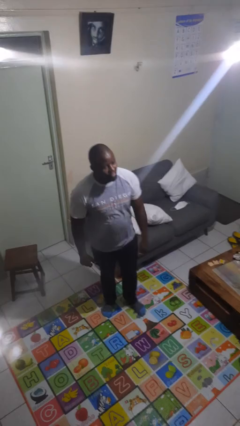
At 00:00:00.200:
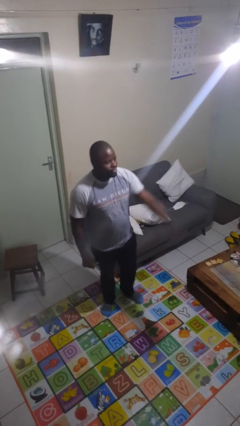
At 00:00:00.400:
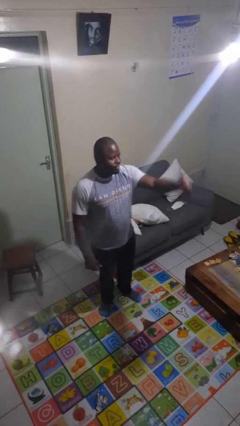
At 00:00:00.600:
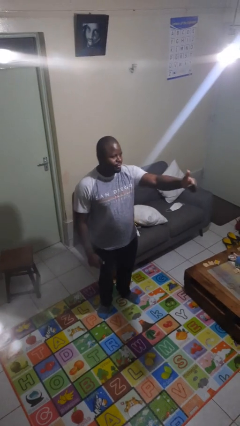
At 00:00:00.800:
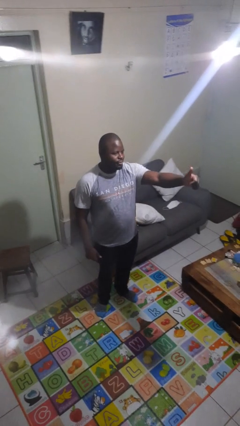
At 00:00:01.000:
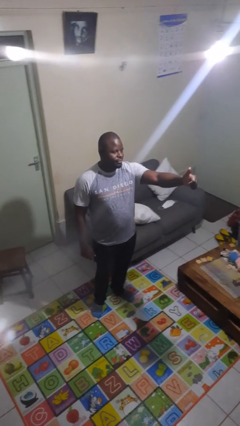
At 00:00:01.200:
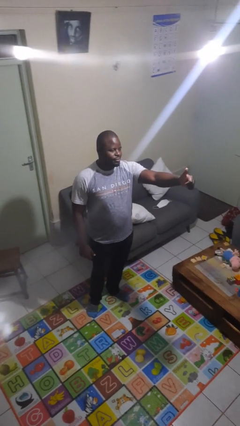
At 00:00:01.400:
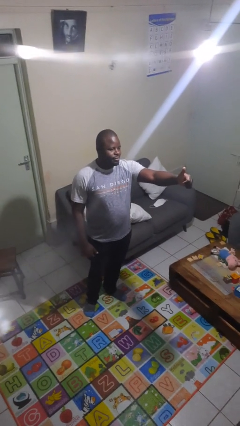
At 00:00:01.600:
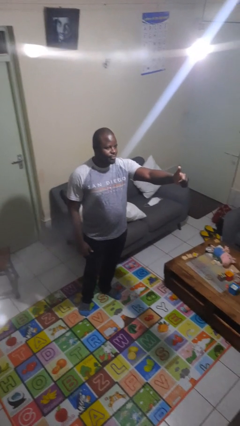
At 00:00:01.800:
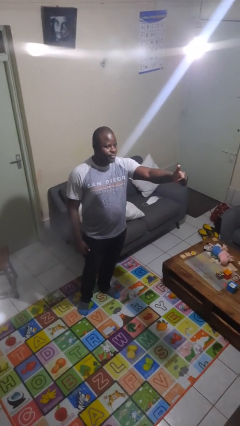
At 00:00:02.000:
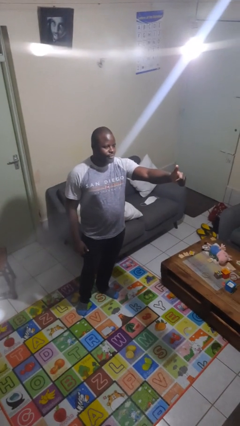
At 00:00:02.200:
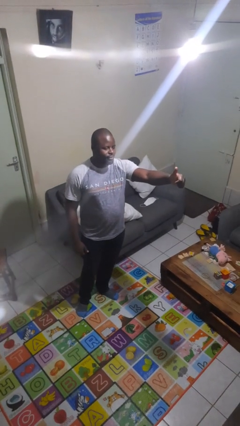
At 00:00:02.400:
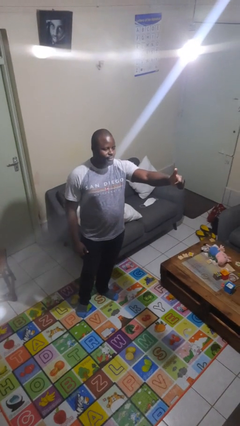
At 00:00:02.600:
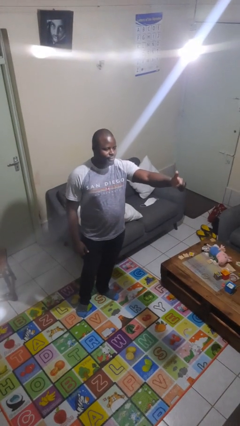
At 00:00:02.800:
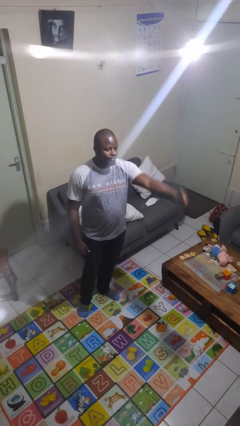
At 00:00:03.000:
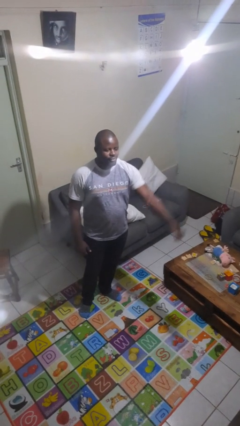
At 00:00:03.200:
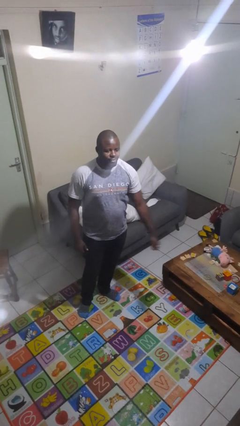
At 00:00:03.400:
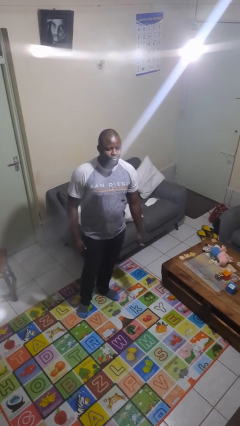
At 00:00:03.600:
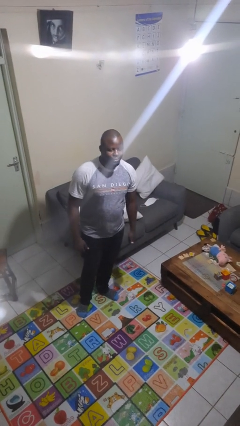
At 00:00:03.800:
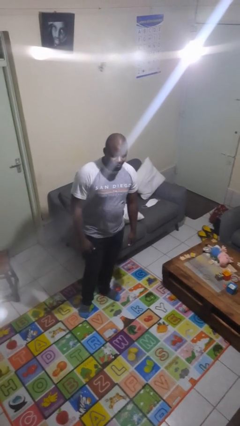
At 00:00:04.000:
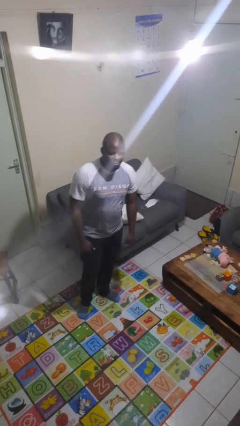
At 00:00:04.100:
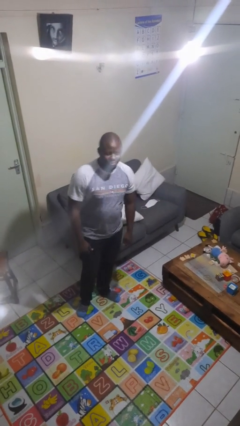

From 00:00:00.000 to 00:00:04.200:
person gestures thumbs up

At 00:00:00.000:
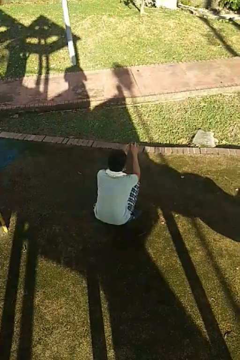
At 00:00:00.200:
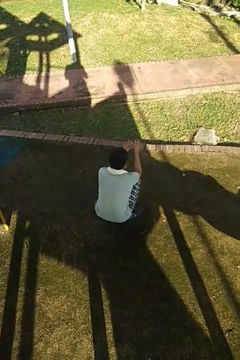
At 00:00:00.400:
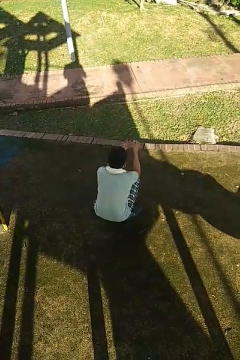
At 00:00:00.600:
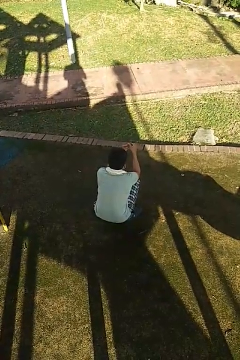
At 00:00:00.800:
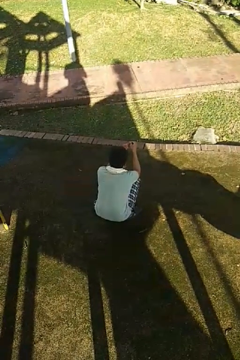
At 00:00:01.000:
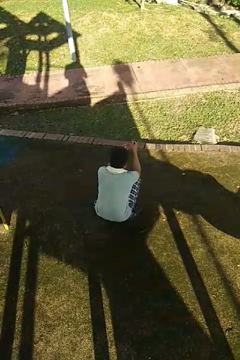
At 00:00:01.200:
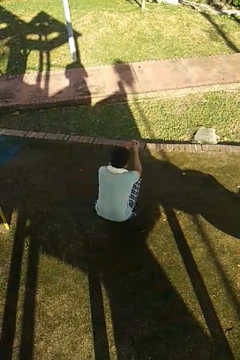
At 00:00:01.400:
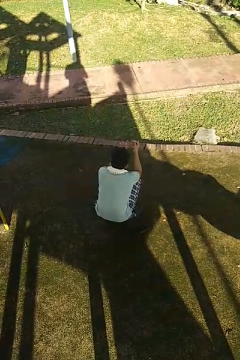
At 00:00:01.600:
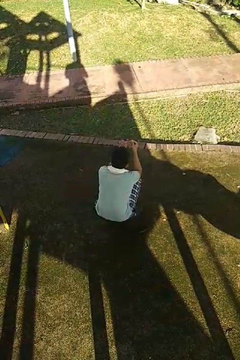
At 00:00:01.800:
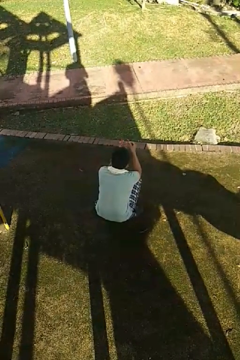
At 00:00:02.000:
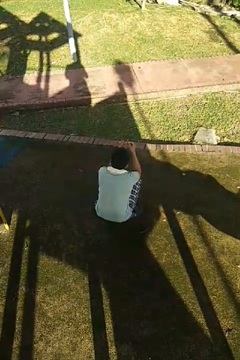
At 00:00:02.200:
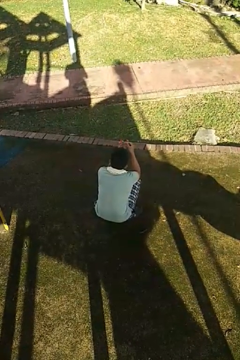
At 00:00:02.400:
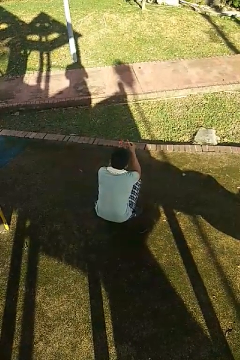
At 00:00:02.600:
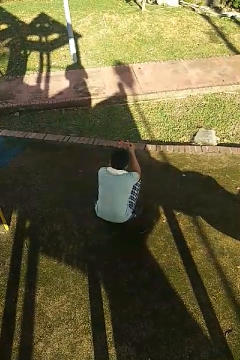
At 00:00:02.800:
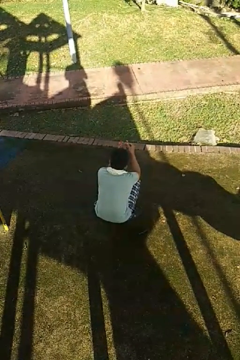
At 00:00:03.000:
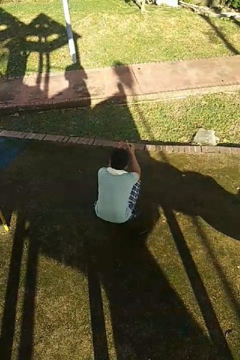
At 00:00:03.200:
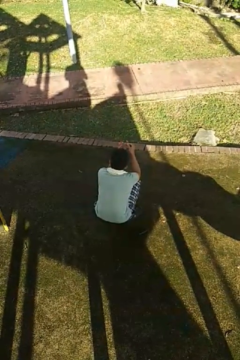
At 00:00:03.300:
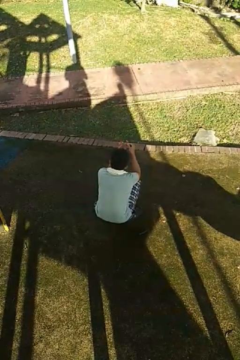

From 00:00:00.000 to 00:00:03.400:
person paints fingernails

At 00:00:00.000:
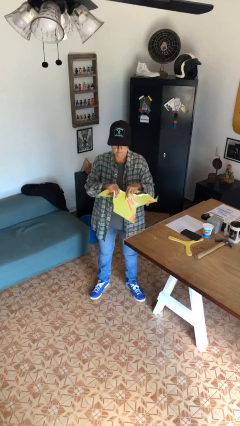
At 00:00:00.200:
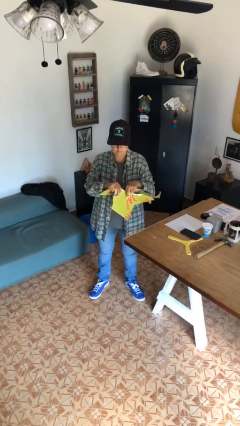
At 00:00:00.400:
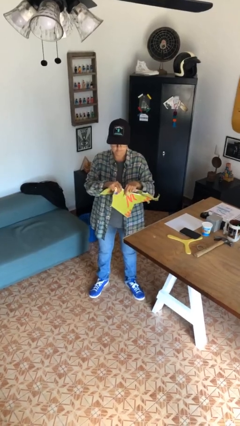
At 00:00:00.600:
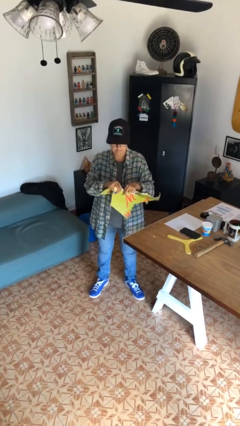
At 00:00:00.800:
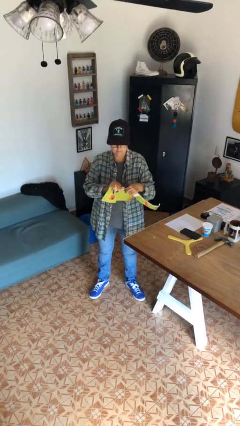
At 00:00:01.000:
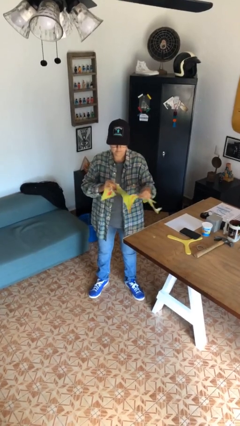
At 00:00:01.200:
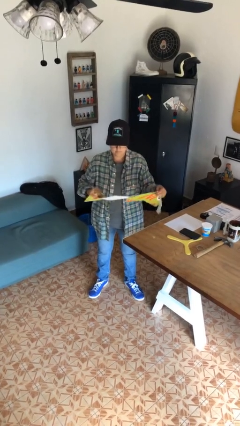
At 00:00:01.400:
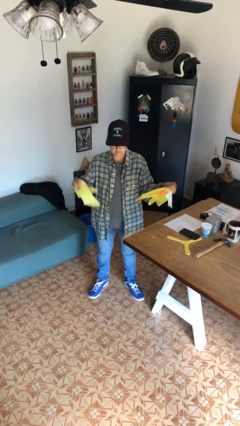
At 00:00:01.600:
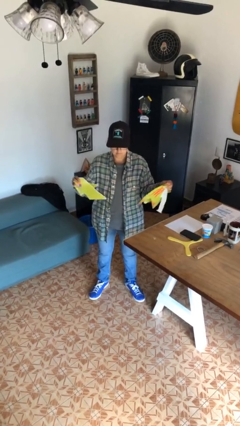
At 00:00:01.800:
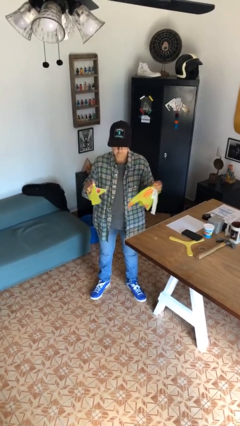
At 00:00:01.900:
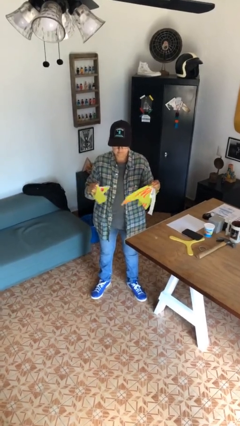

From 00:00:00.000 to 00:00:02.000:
person tears paper

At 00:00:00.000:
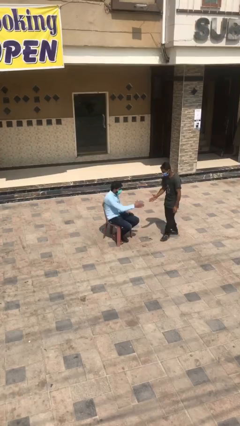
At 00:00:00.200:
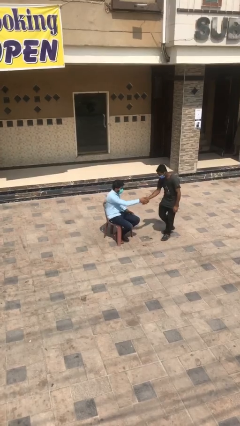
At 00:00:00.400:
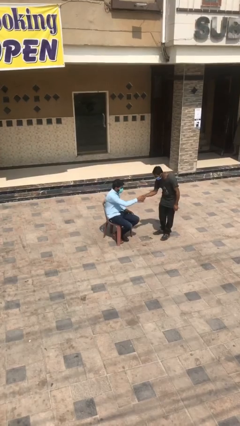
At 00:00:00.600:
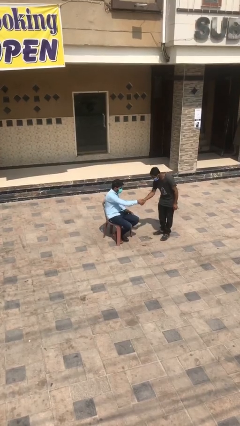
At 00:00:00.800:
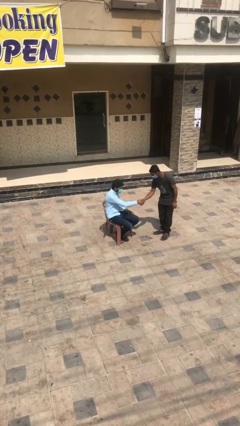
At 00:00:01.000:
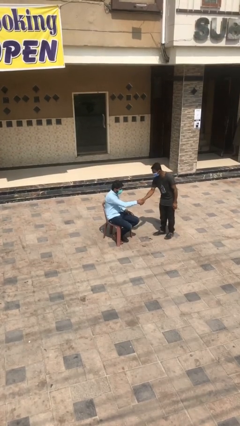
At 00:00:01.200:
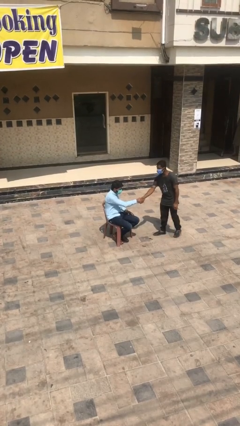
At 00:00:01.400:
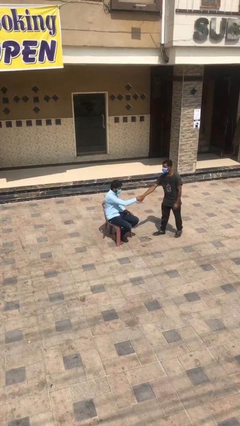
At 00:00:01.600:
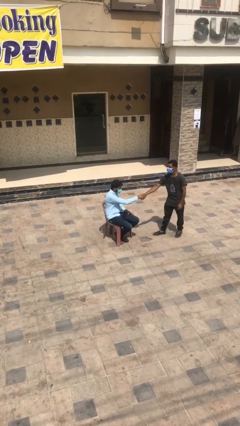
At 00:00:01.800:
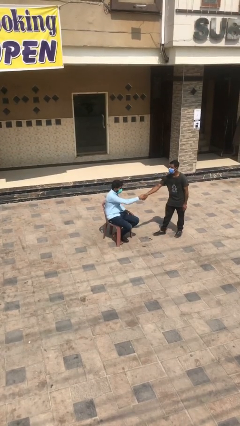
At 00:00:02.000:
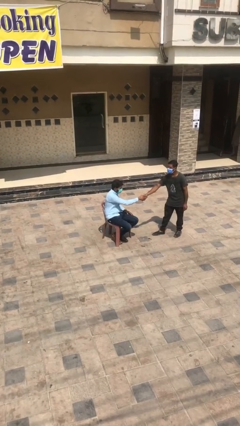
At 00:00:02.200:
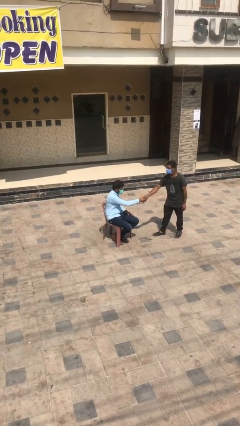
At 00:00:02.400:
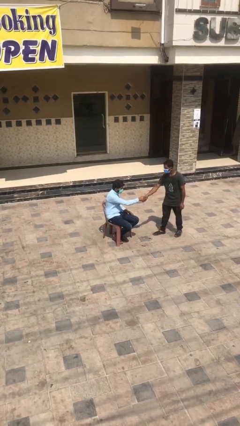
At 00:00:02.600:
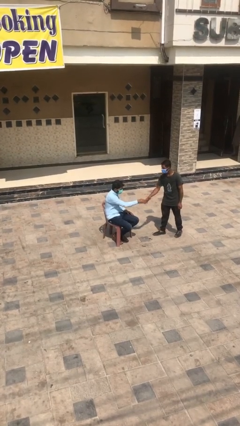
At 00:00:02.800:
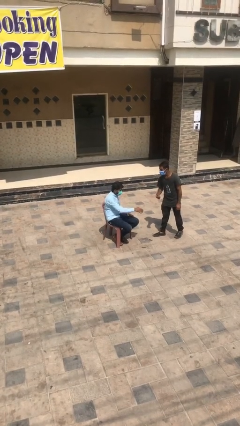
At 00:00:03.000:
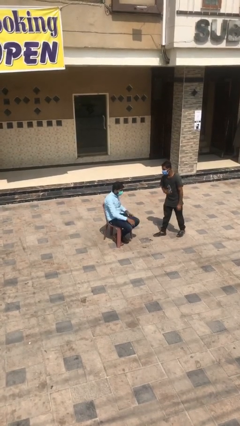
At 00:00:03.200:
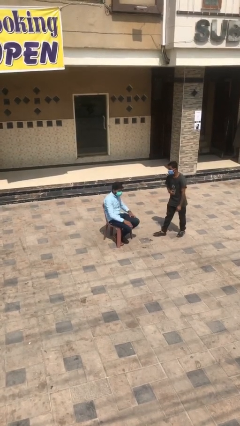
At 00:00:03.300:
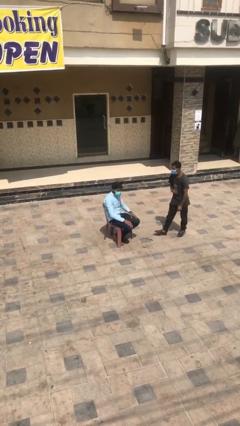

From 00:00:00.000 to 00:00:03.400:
person shakes hand

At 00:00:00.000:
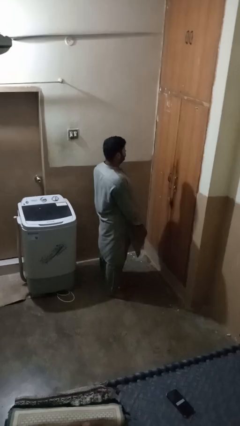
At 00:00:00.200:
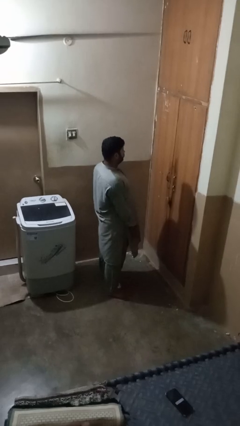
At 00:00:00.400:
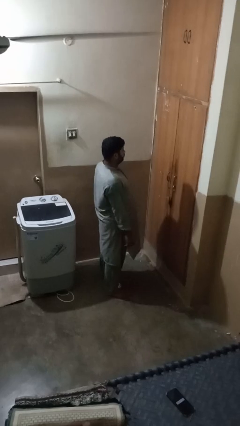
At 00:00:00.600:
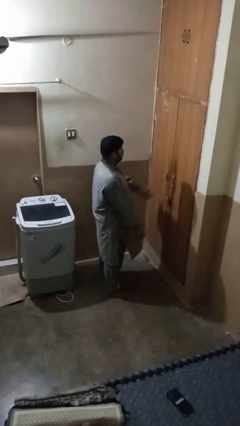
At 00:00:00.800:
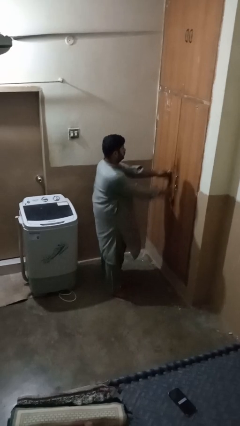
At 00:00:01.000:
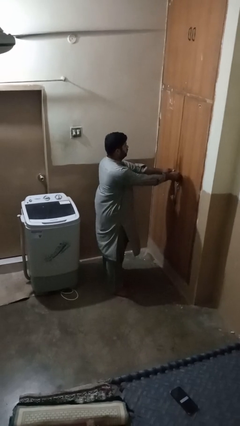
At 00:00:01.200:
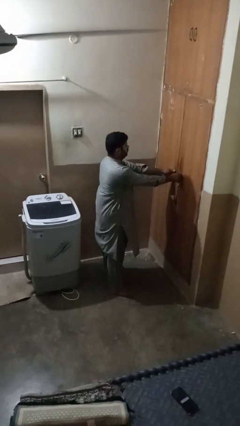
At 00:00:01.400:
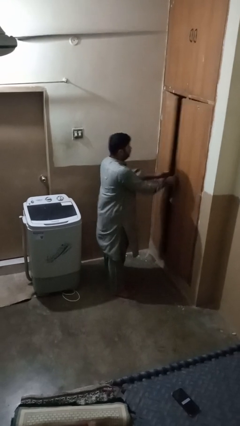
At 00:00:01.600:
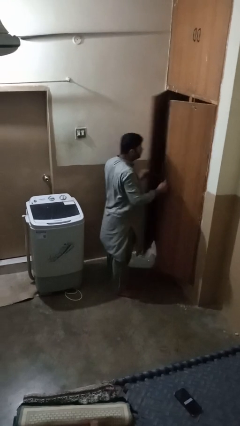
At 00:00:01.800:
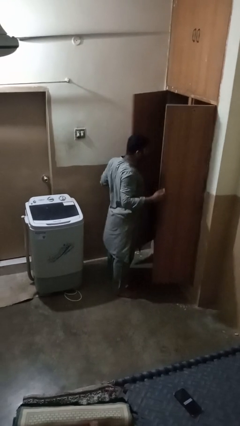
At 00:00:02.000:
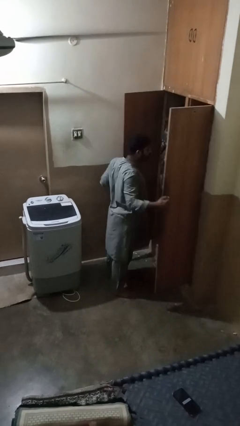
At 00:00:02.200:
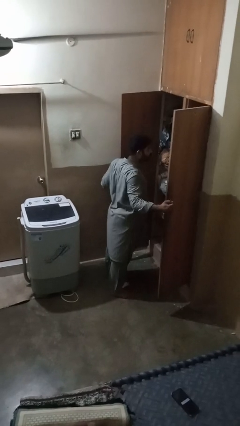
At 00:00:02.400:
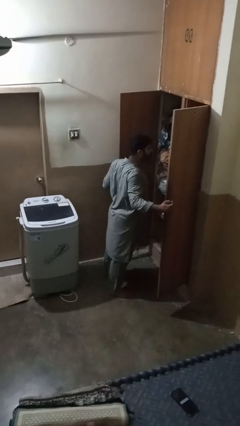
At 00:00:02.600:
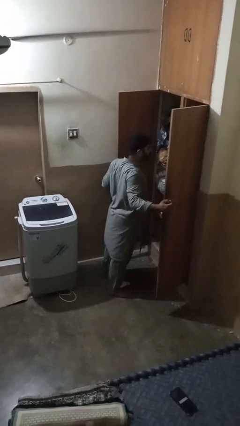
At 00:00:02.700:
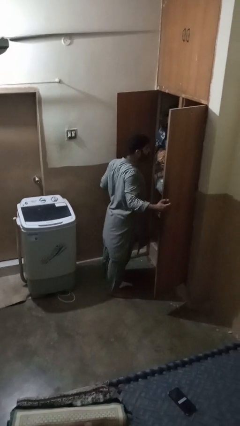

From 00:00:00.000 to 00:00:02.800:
person opens closet door

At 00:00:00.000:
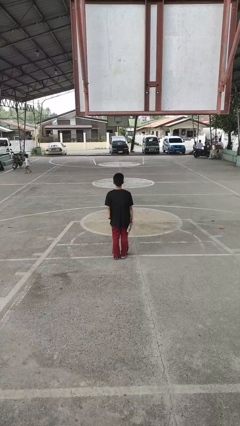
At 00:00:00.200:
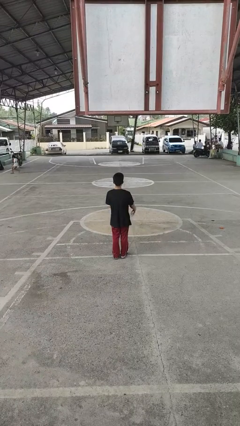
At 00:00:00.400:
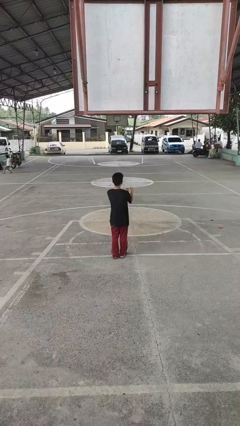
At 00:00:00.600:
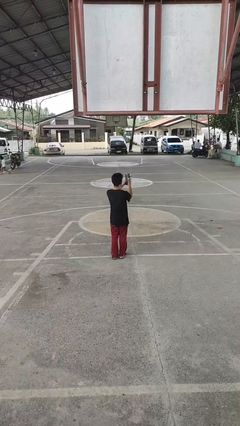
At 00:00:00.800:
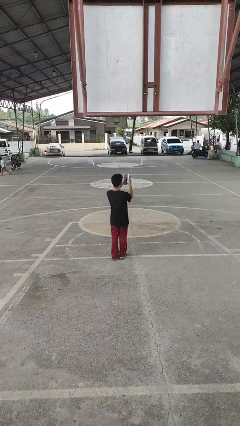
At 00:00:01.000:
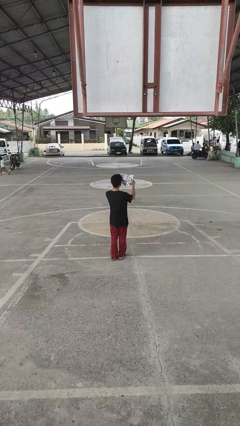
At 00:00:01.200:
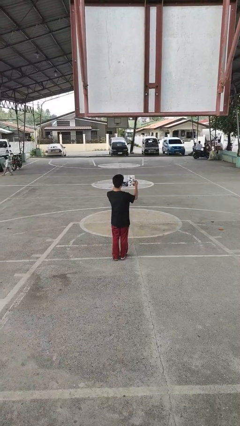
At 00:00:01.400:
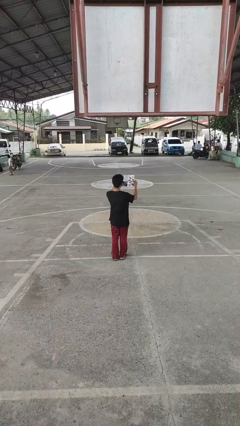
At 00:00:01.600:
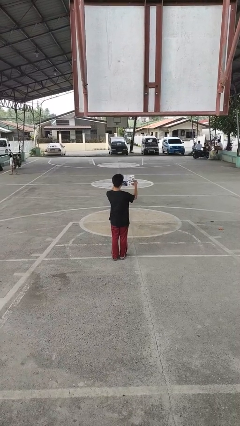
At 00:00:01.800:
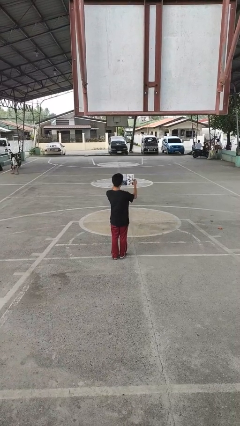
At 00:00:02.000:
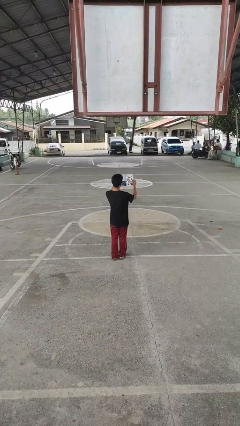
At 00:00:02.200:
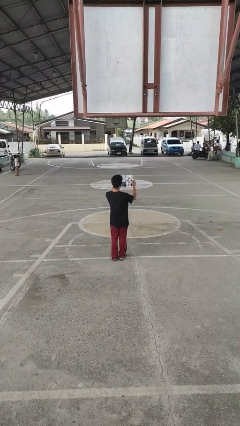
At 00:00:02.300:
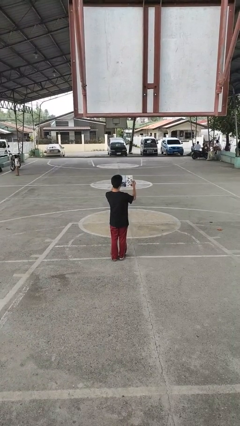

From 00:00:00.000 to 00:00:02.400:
person reads magazine
